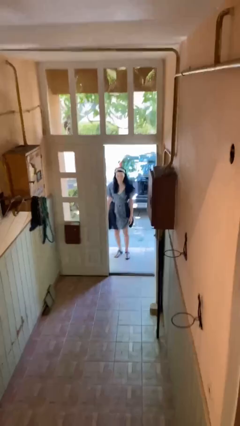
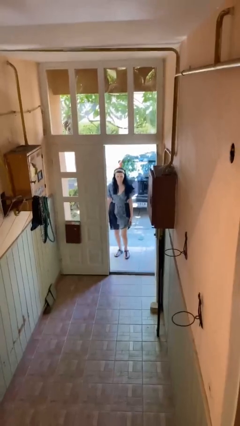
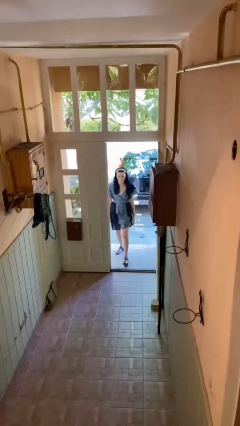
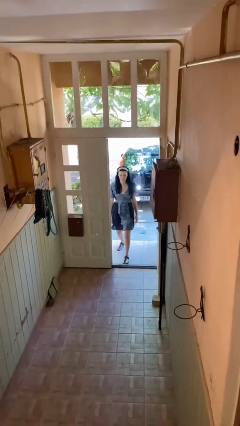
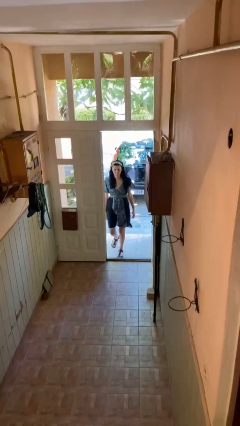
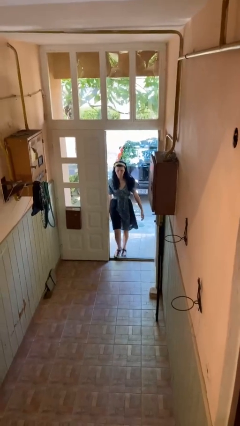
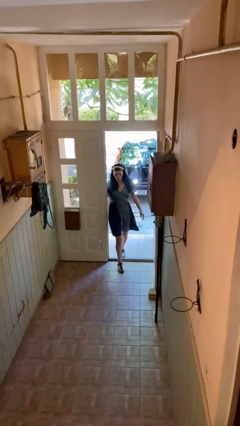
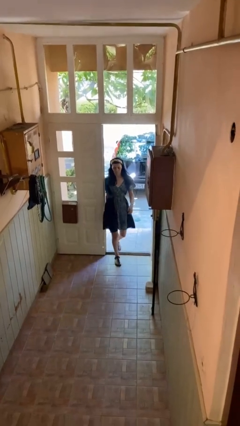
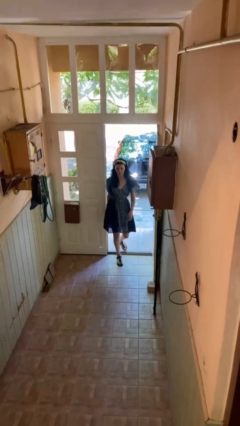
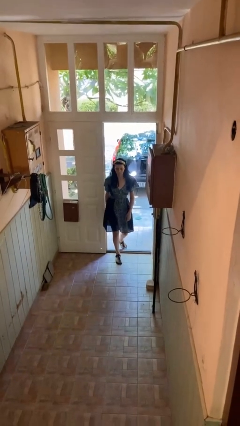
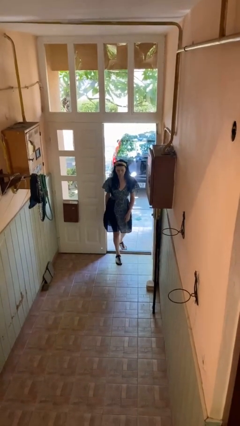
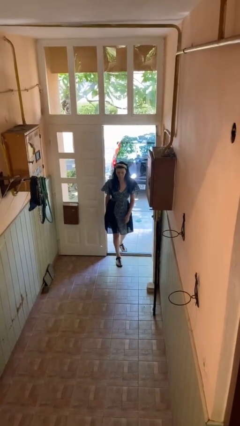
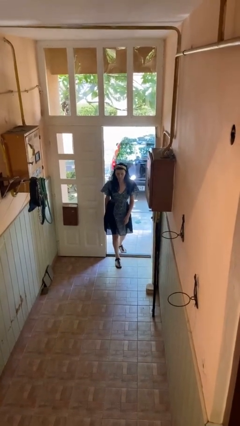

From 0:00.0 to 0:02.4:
person bumps into wall

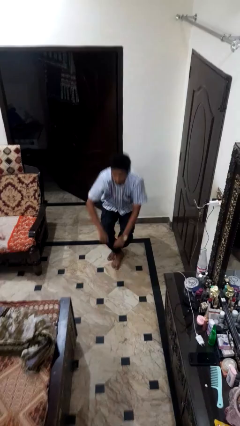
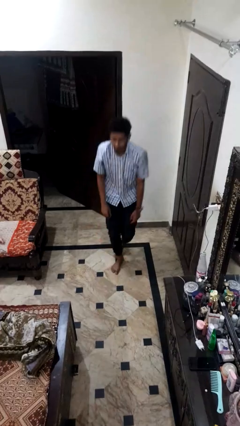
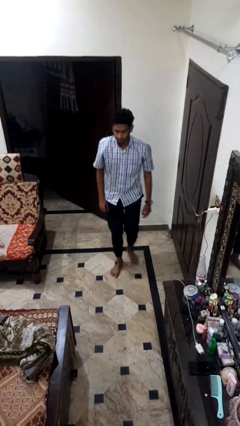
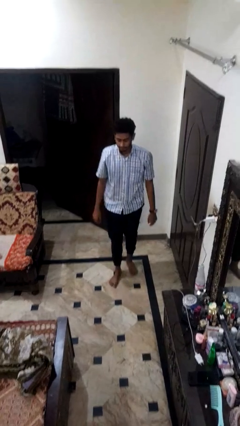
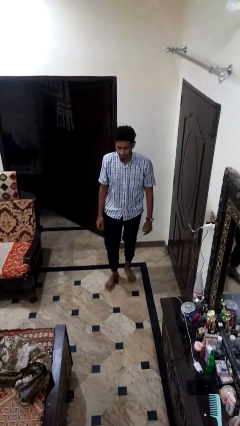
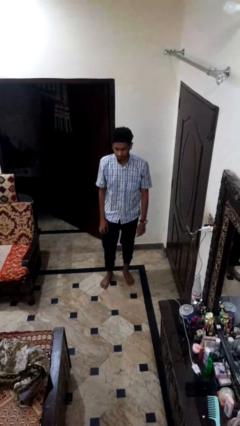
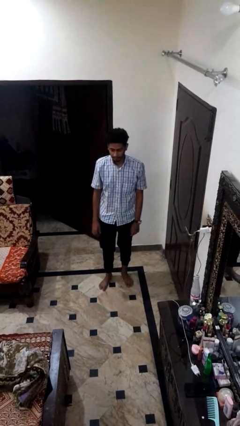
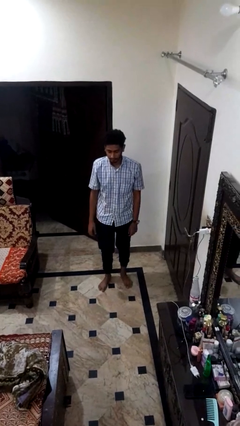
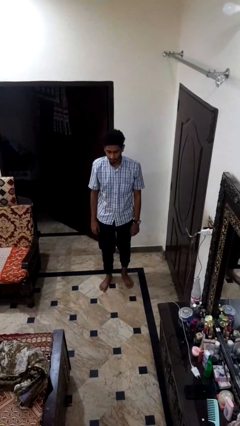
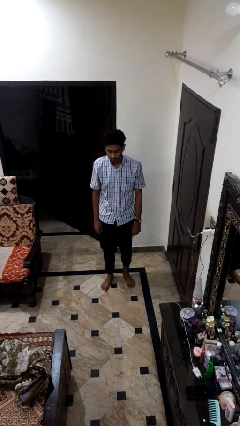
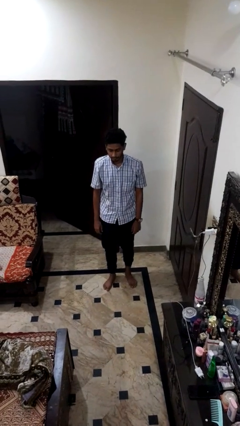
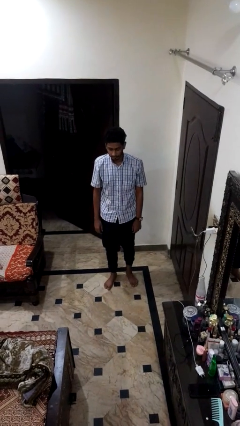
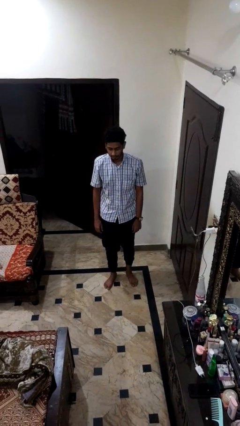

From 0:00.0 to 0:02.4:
person stands up from floor

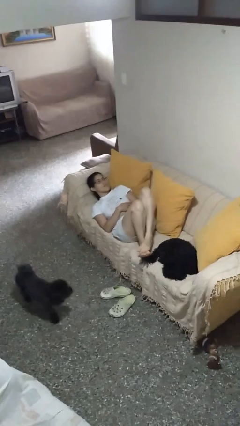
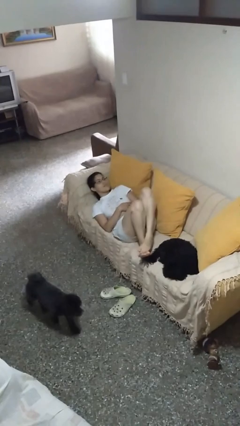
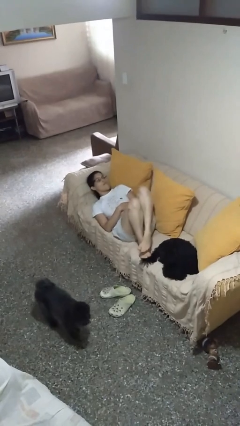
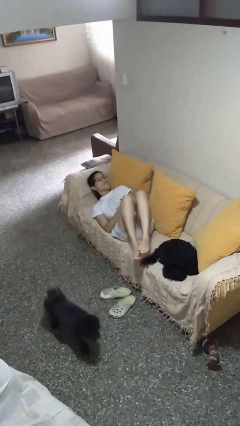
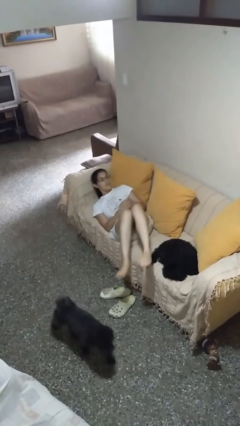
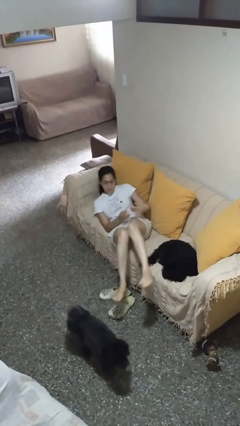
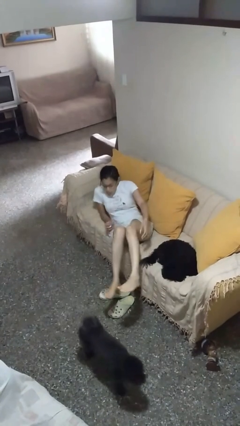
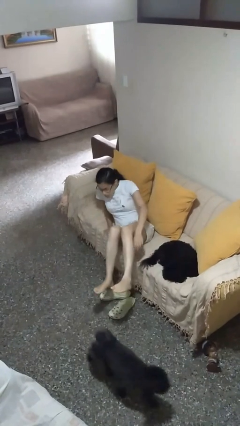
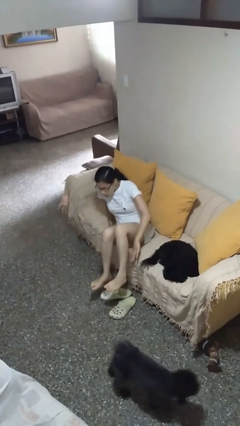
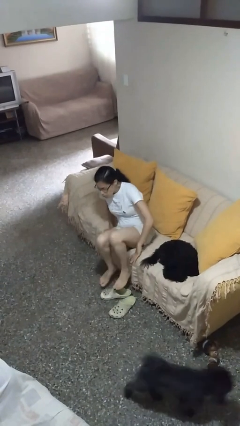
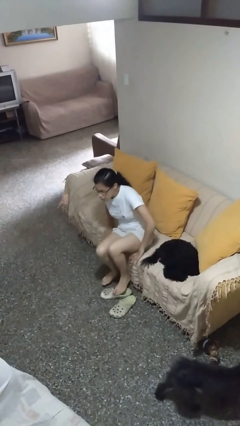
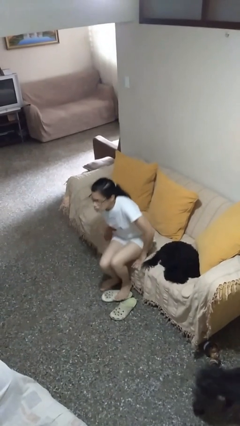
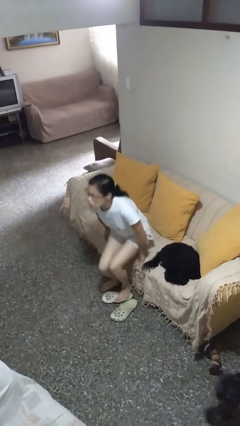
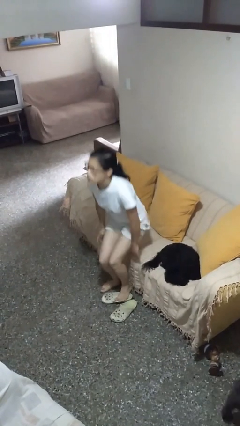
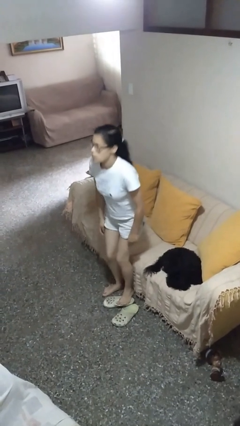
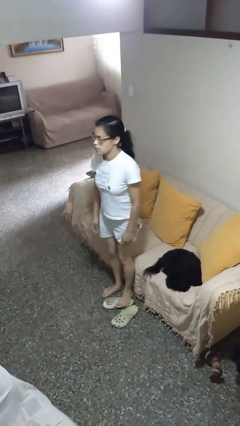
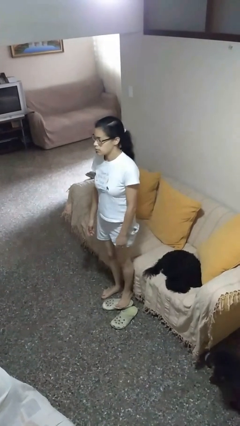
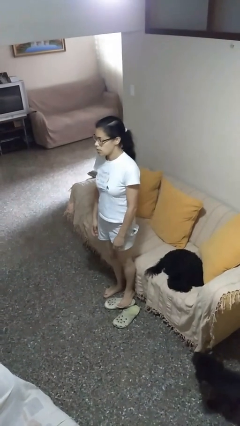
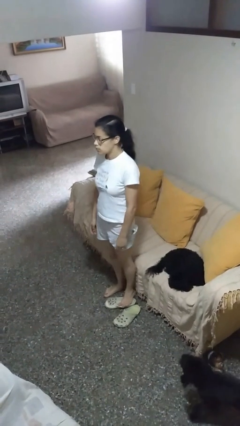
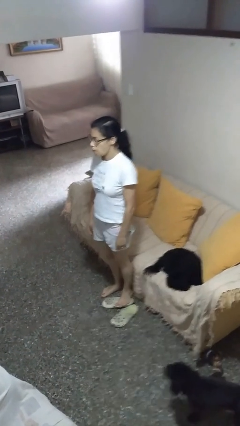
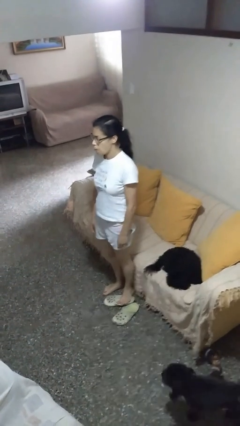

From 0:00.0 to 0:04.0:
person stands up

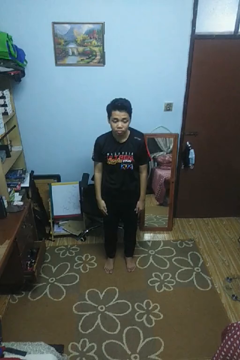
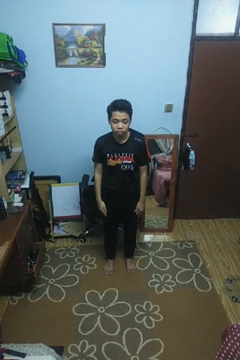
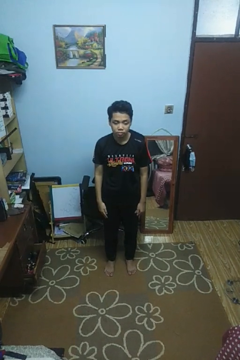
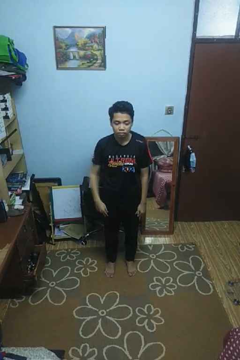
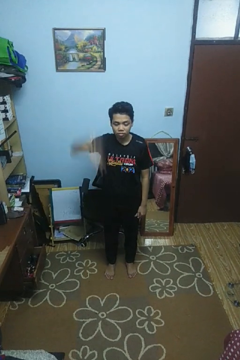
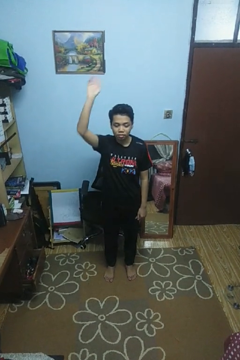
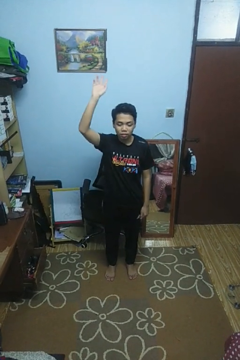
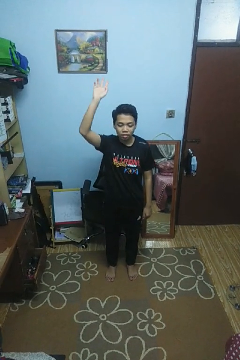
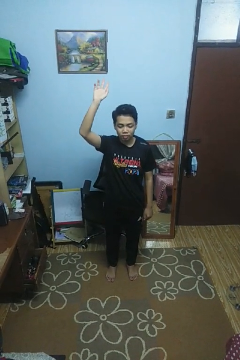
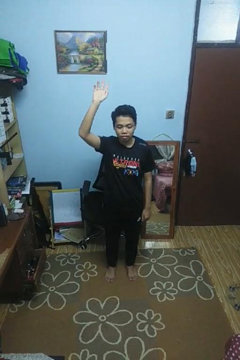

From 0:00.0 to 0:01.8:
person gestures raise hand

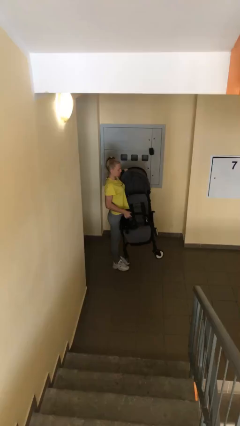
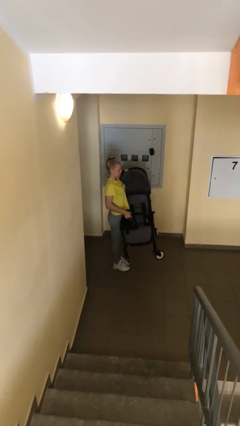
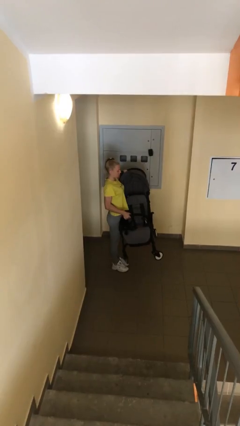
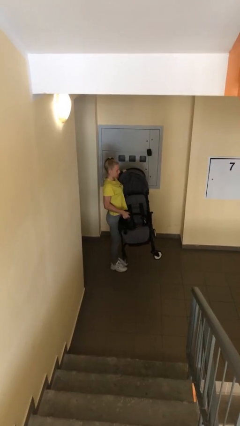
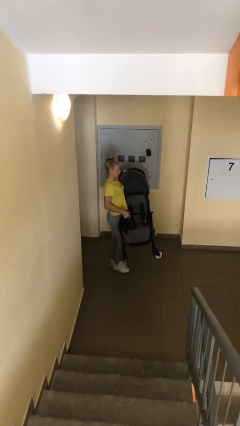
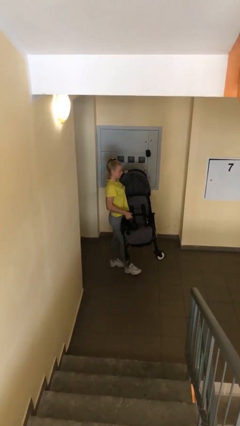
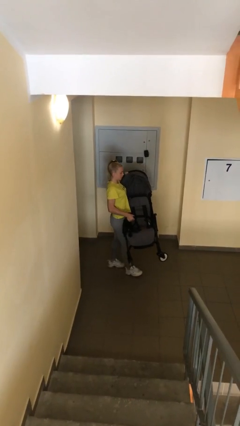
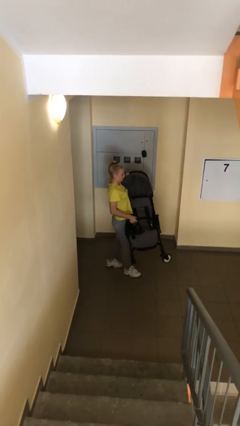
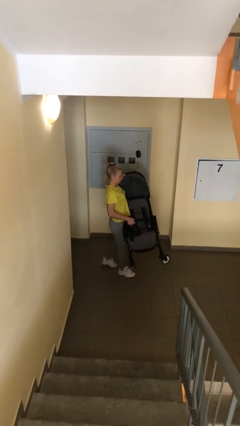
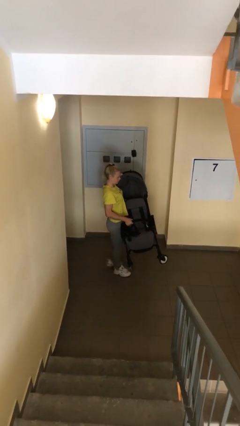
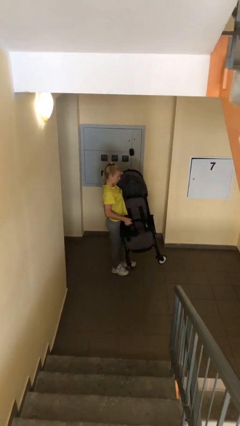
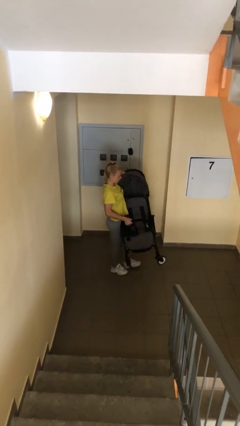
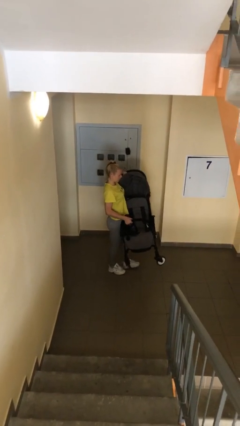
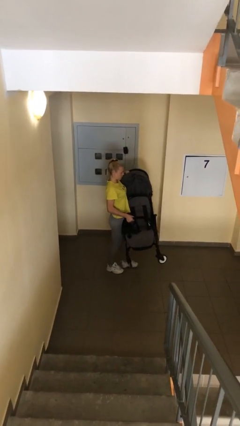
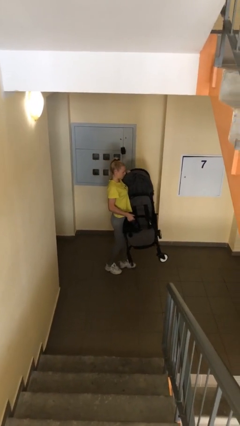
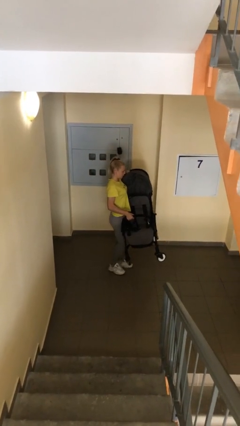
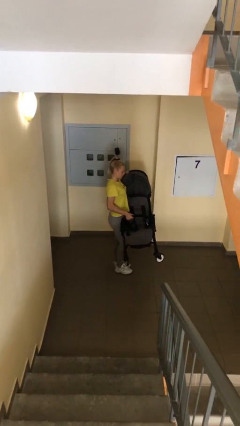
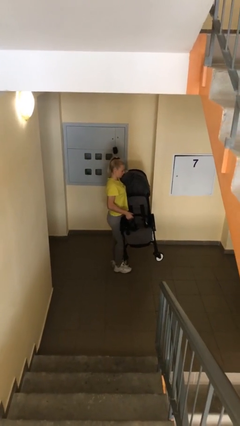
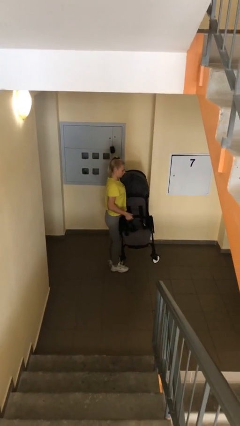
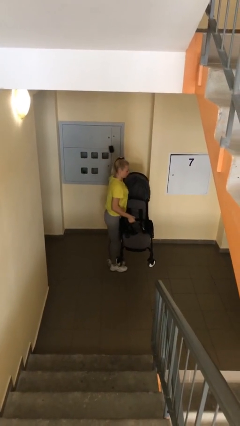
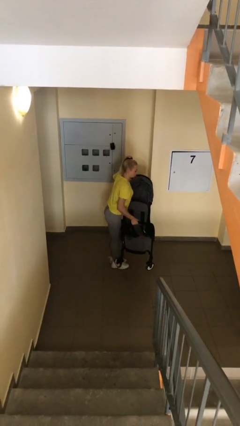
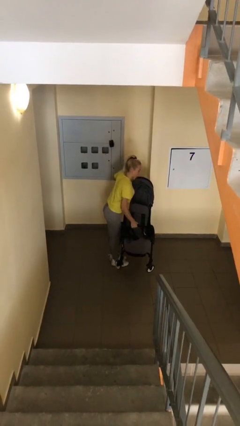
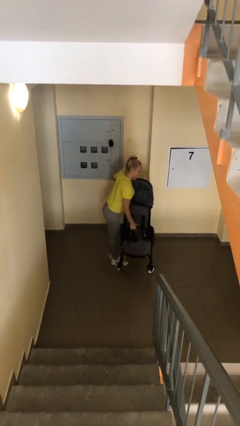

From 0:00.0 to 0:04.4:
person carries heavy object

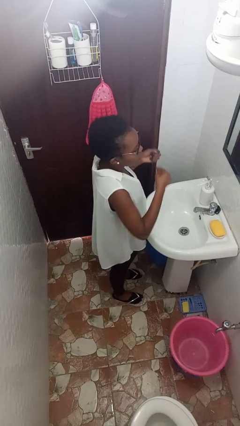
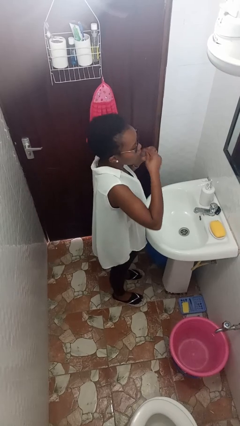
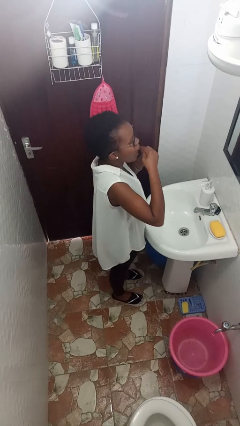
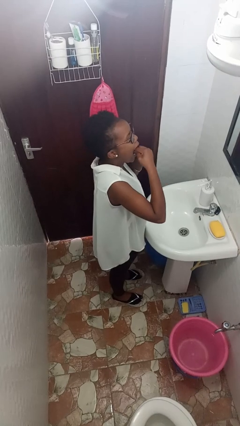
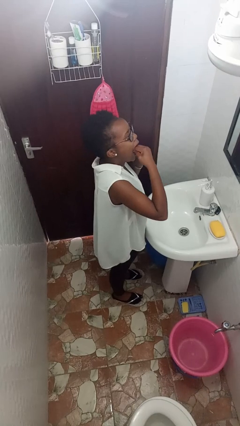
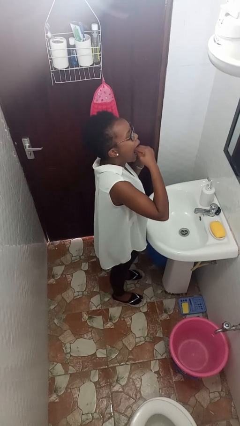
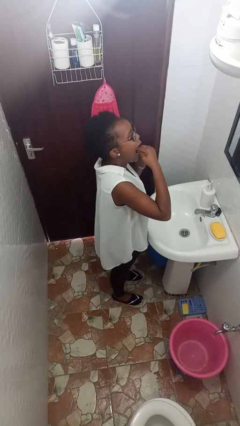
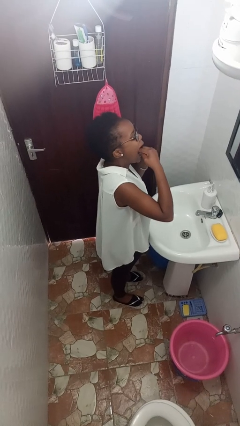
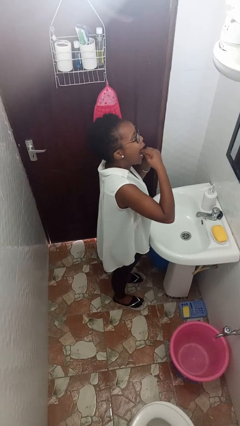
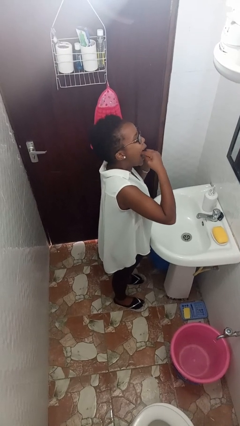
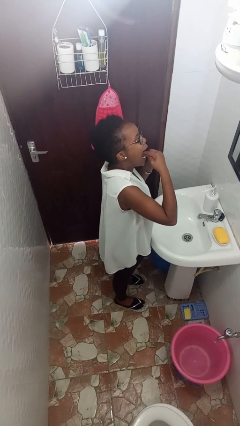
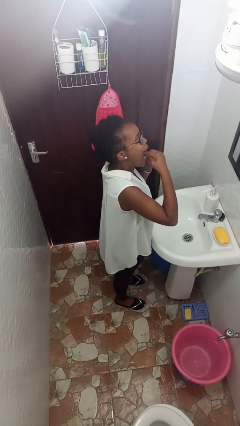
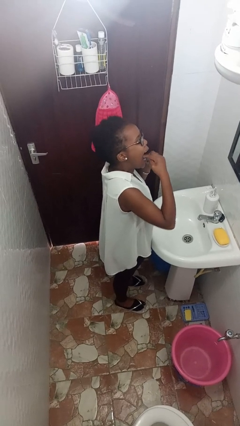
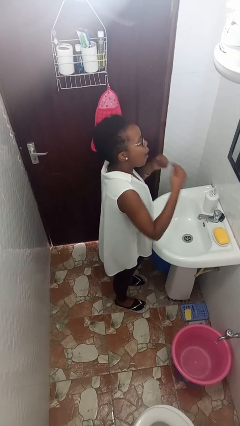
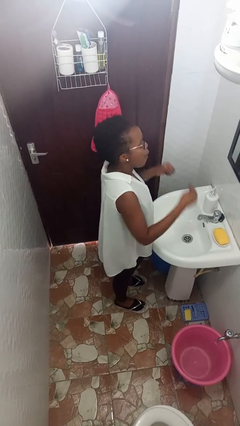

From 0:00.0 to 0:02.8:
person flosses
